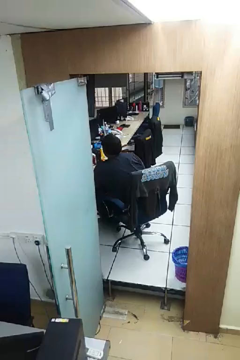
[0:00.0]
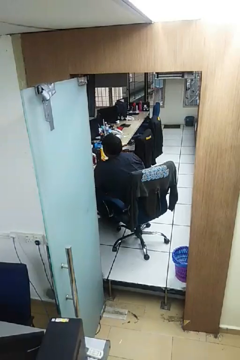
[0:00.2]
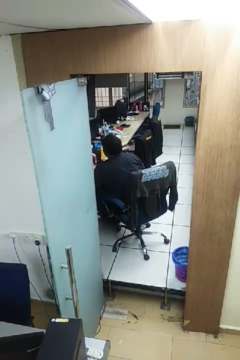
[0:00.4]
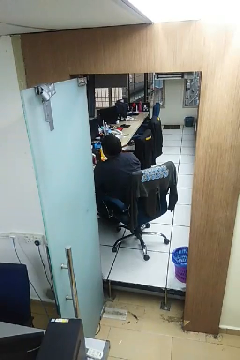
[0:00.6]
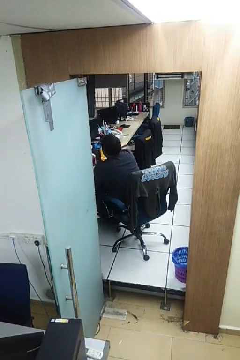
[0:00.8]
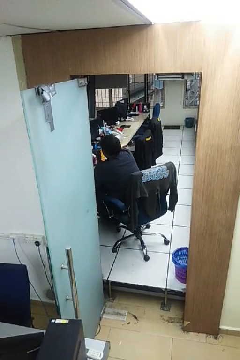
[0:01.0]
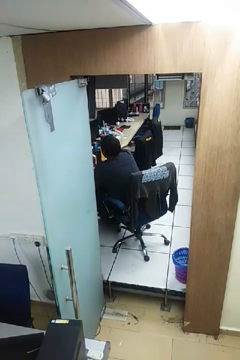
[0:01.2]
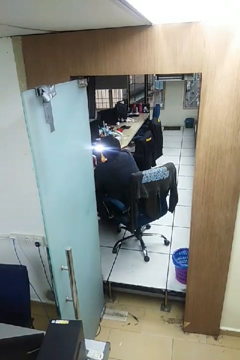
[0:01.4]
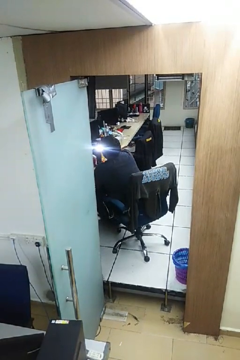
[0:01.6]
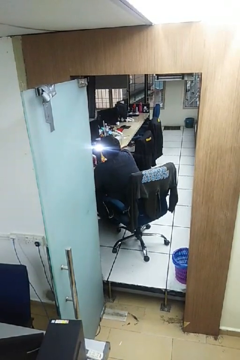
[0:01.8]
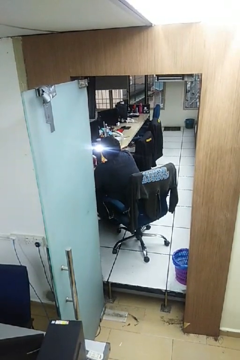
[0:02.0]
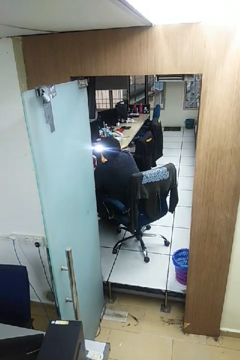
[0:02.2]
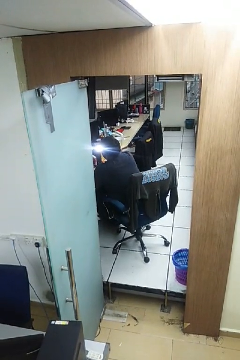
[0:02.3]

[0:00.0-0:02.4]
person turns on lamp

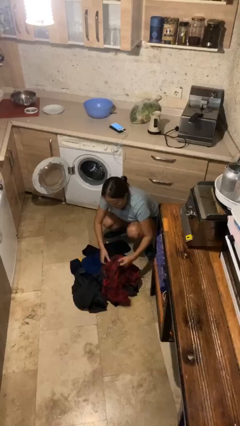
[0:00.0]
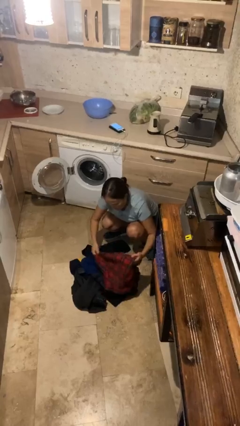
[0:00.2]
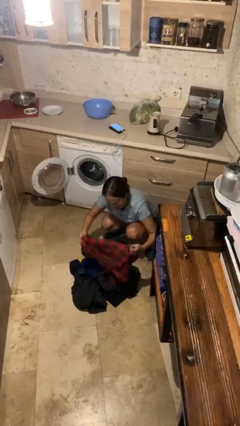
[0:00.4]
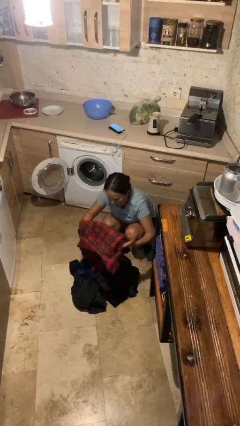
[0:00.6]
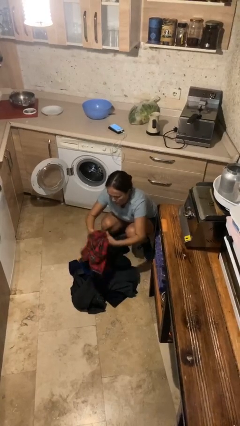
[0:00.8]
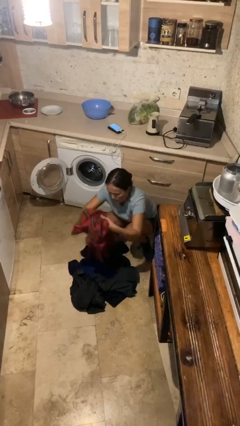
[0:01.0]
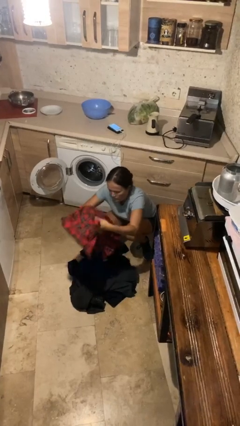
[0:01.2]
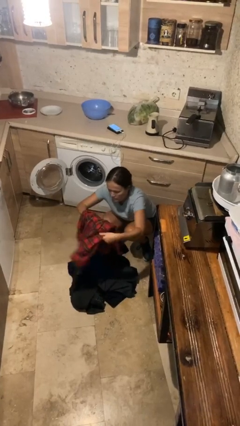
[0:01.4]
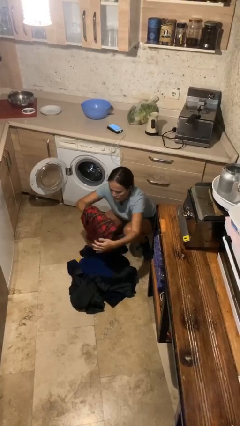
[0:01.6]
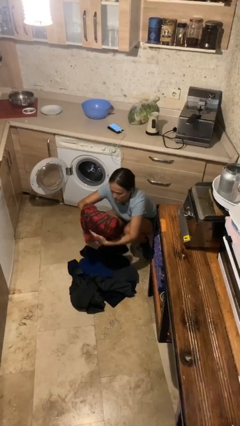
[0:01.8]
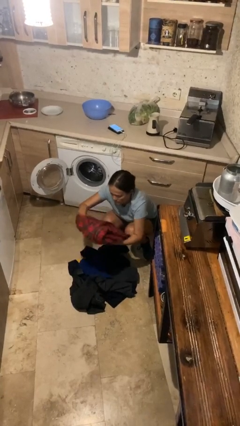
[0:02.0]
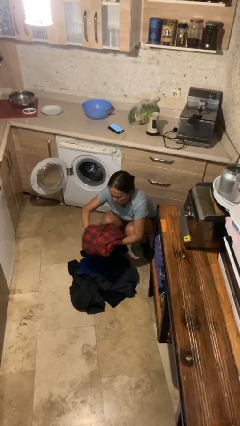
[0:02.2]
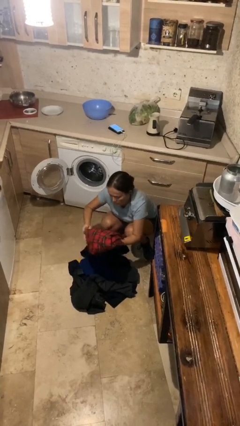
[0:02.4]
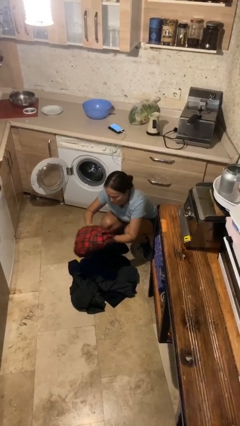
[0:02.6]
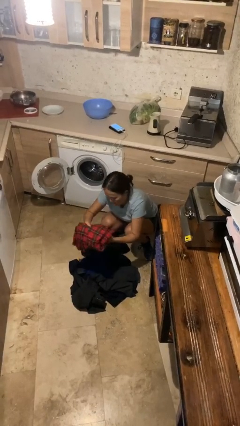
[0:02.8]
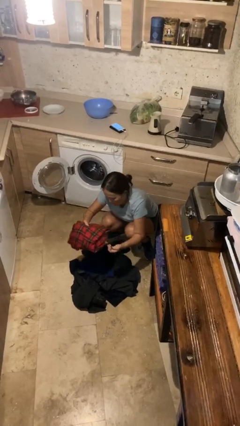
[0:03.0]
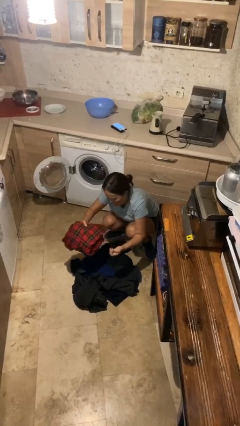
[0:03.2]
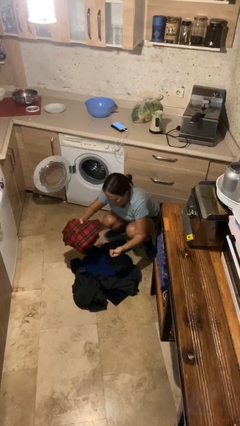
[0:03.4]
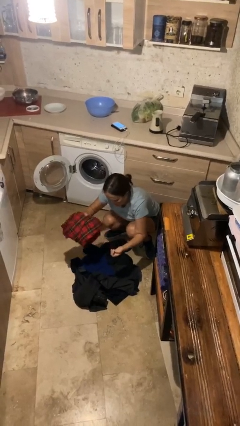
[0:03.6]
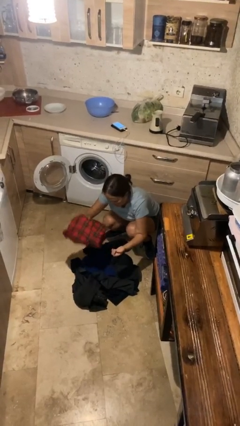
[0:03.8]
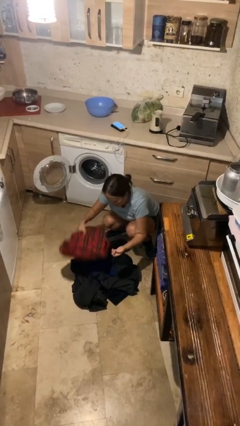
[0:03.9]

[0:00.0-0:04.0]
person folds shirt

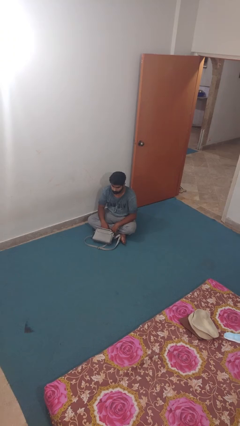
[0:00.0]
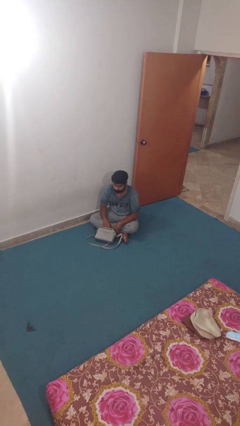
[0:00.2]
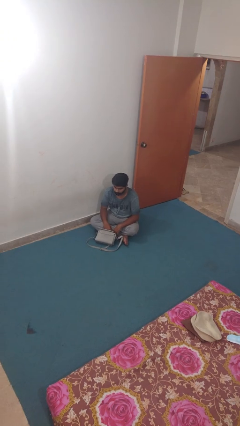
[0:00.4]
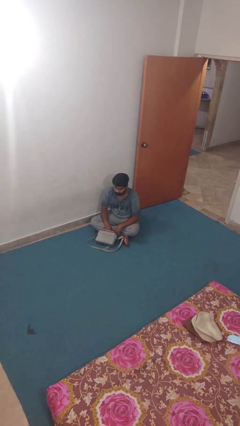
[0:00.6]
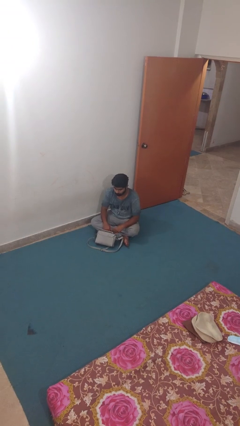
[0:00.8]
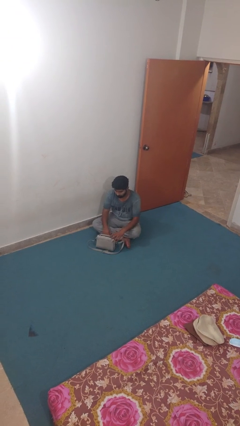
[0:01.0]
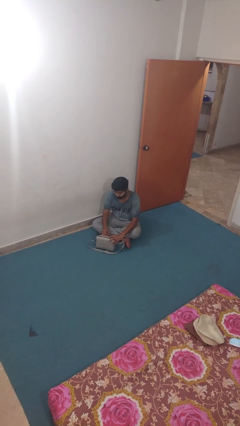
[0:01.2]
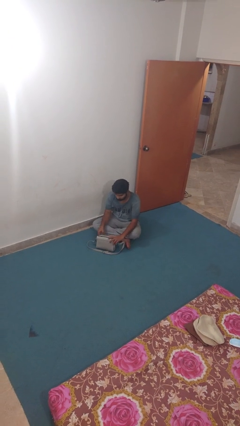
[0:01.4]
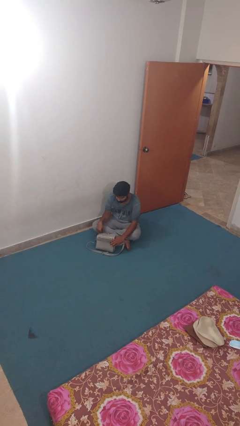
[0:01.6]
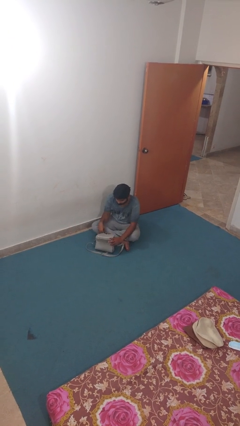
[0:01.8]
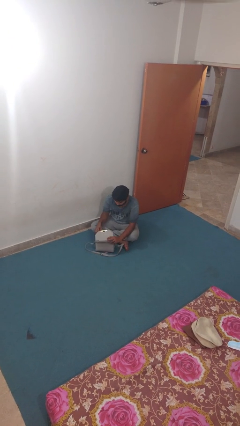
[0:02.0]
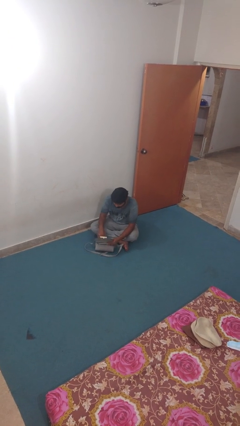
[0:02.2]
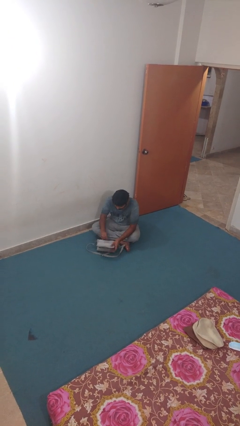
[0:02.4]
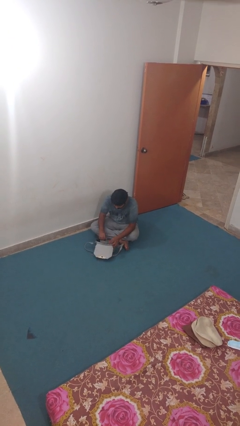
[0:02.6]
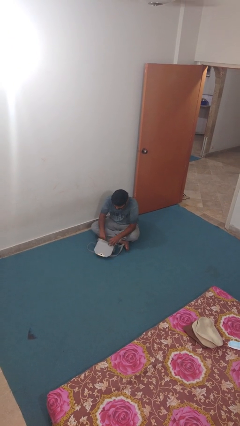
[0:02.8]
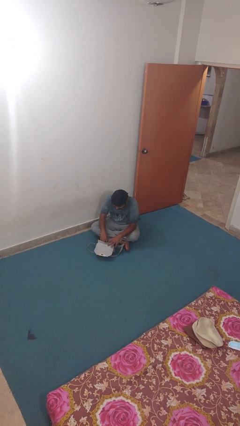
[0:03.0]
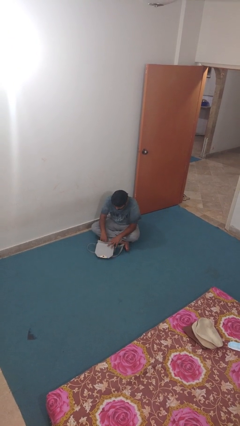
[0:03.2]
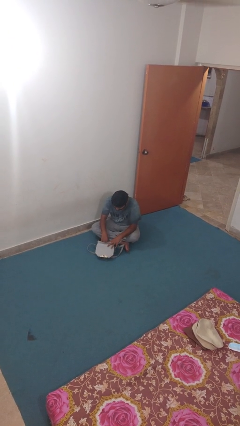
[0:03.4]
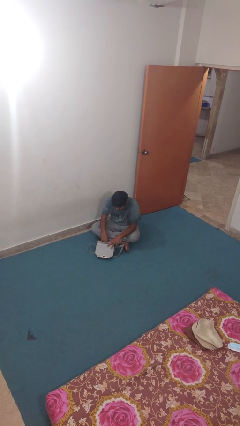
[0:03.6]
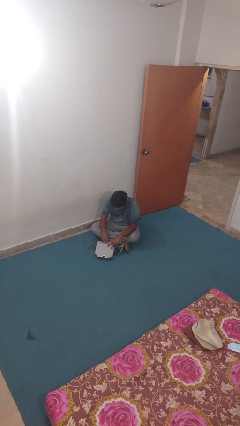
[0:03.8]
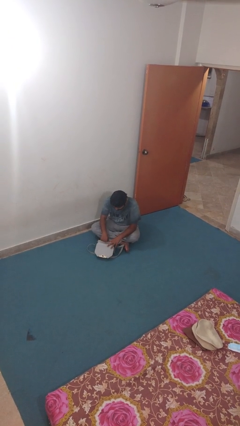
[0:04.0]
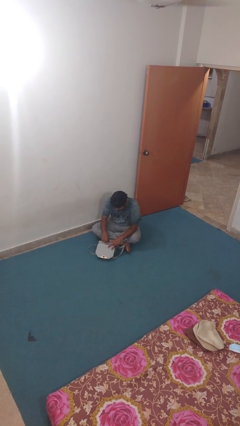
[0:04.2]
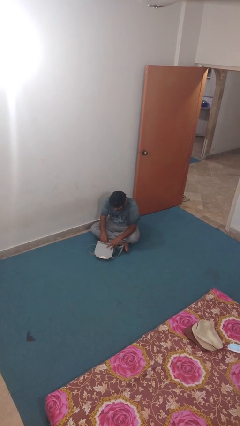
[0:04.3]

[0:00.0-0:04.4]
person searches in purse

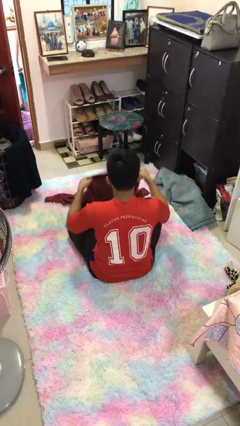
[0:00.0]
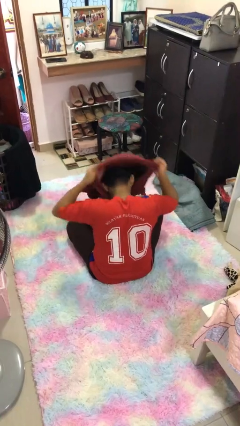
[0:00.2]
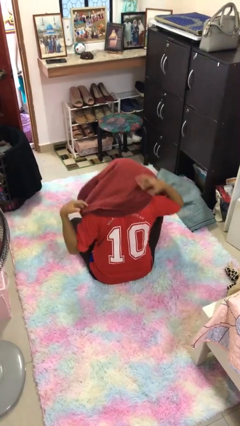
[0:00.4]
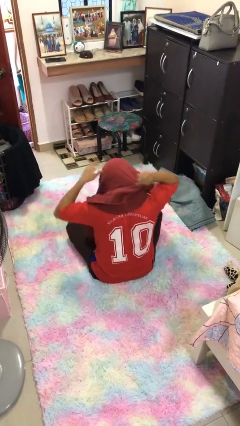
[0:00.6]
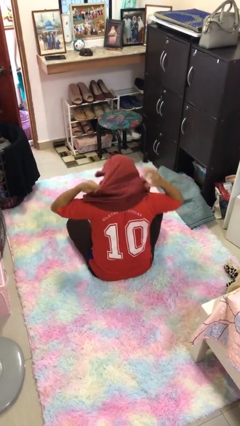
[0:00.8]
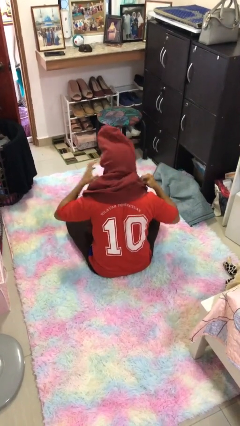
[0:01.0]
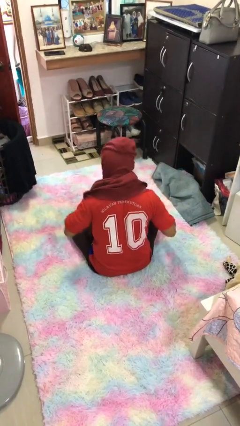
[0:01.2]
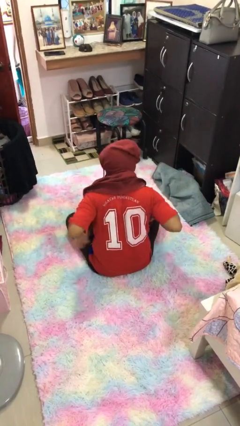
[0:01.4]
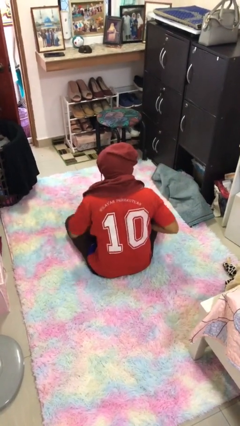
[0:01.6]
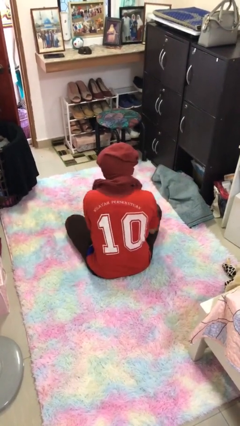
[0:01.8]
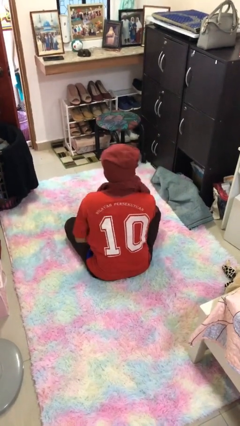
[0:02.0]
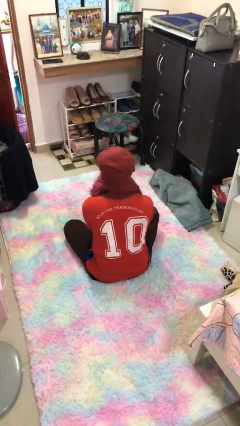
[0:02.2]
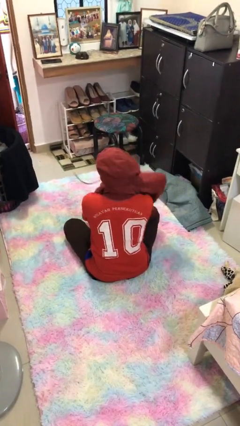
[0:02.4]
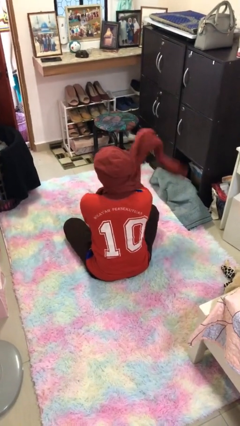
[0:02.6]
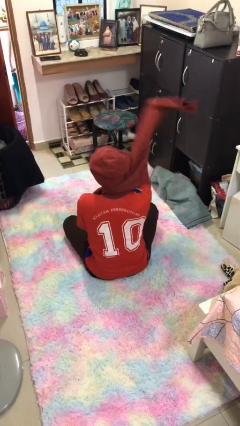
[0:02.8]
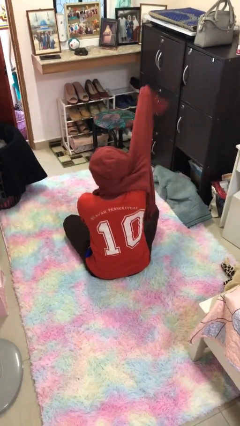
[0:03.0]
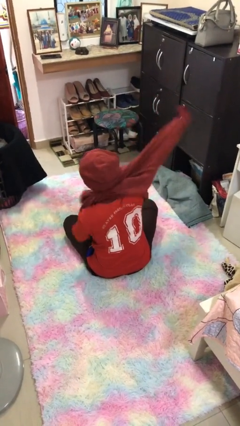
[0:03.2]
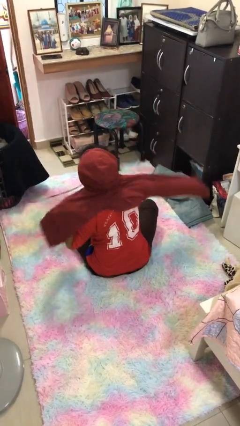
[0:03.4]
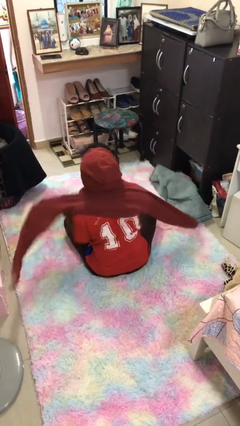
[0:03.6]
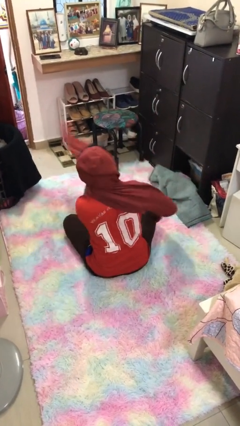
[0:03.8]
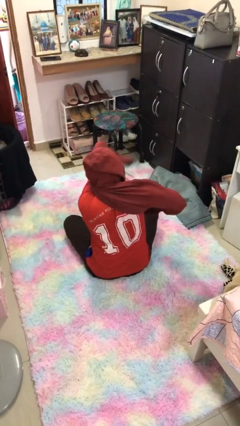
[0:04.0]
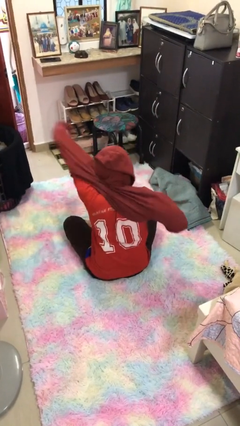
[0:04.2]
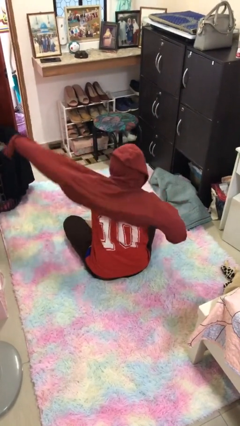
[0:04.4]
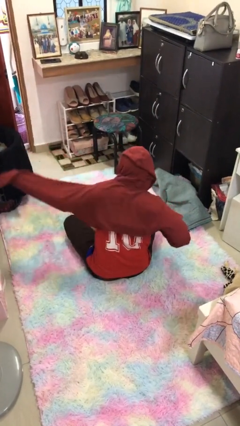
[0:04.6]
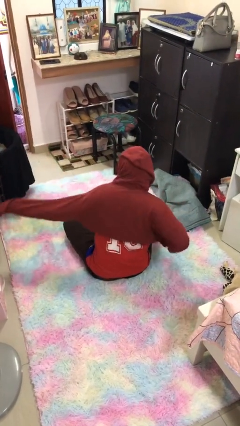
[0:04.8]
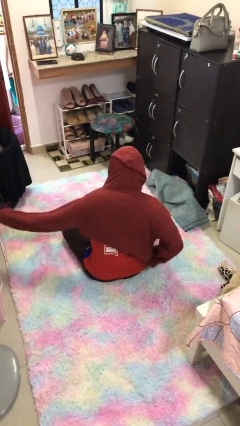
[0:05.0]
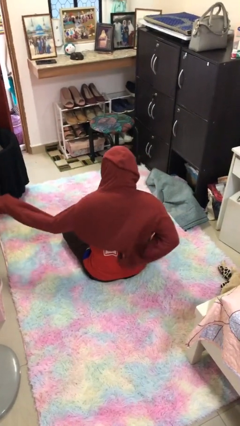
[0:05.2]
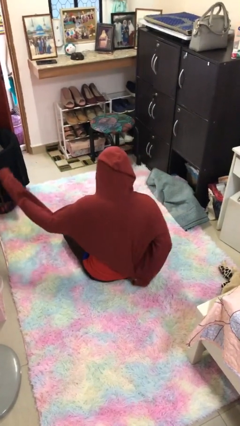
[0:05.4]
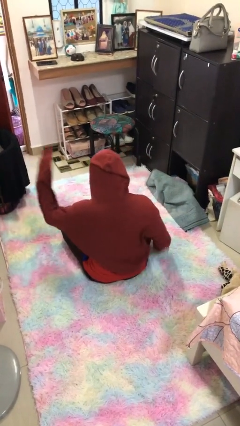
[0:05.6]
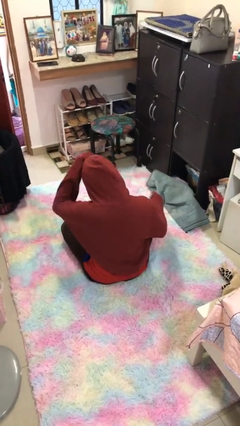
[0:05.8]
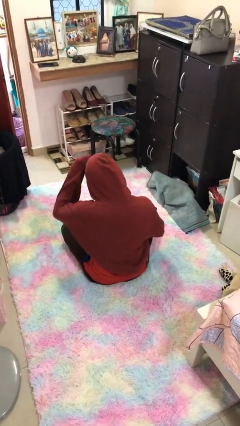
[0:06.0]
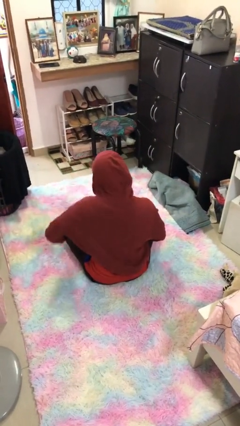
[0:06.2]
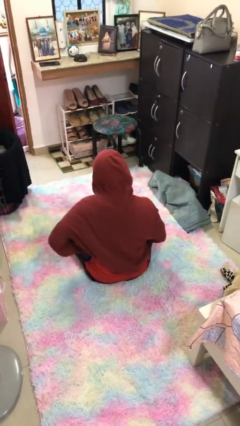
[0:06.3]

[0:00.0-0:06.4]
person puts on hoodie

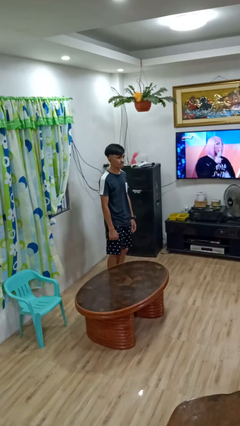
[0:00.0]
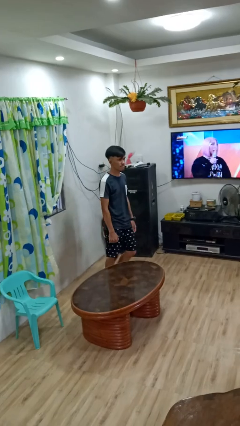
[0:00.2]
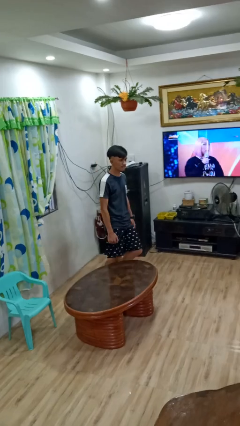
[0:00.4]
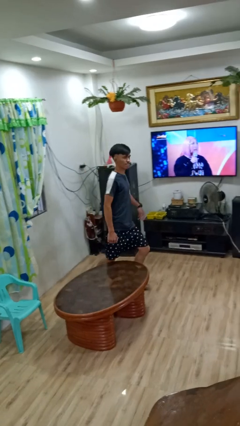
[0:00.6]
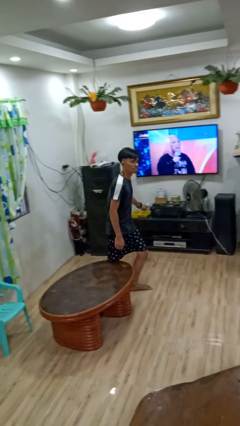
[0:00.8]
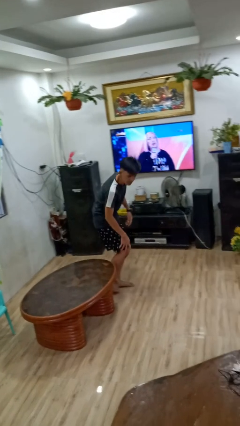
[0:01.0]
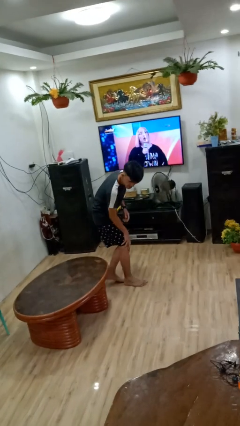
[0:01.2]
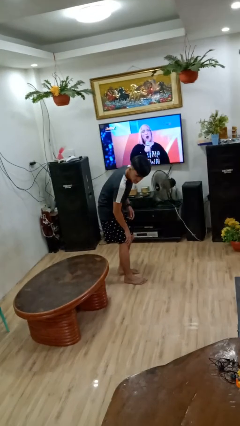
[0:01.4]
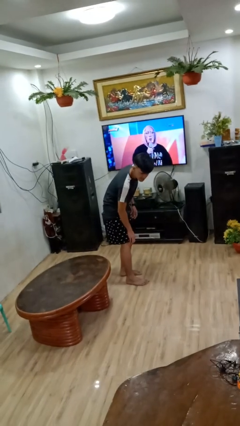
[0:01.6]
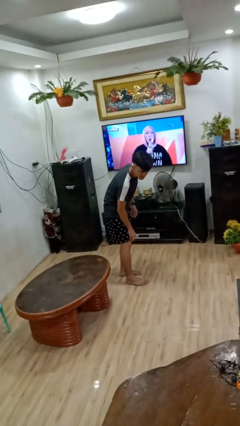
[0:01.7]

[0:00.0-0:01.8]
person bumps into table
